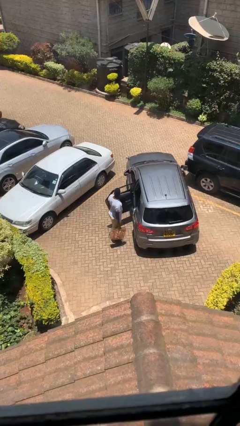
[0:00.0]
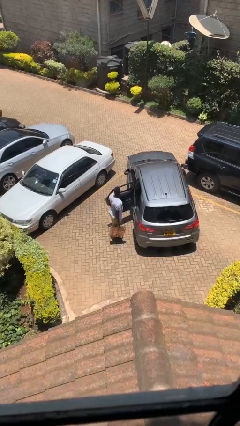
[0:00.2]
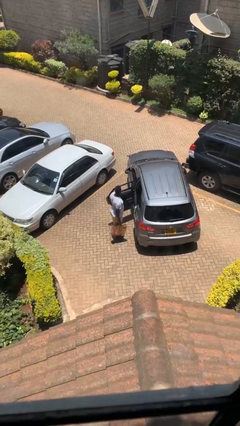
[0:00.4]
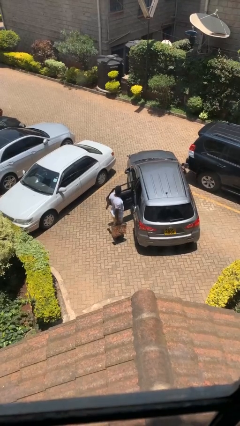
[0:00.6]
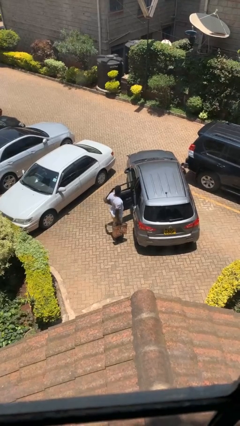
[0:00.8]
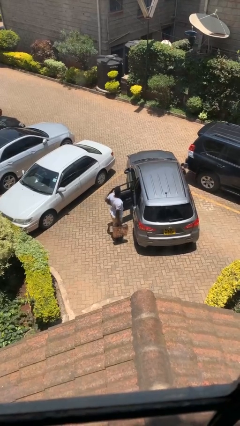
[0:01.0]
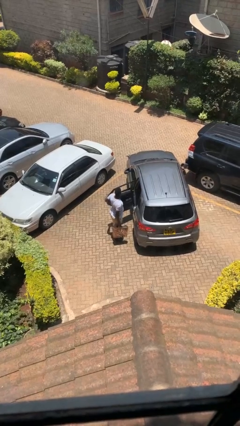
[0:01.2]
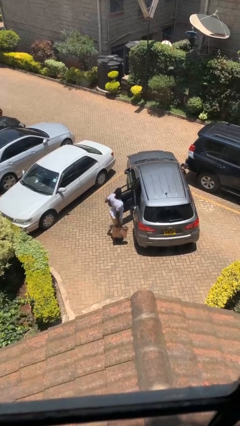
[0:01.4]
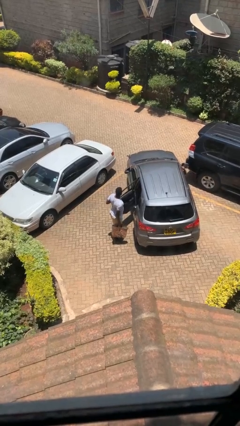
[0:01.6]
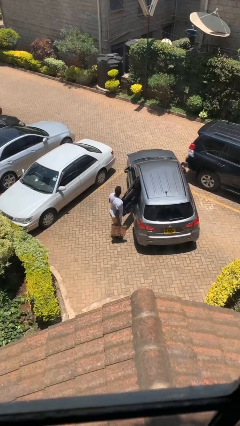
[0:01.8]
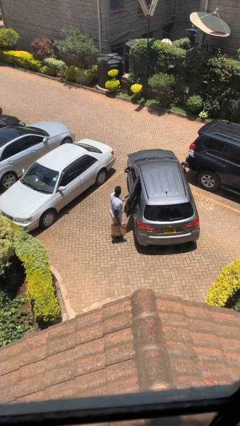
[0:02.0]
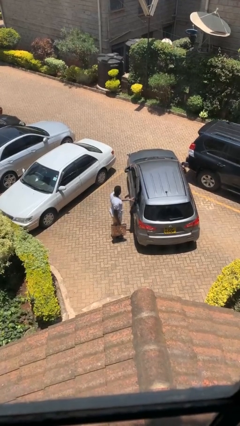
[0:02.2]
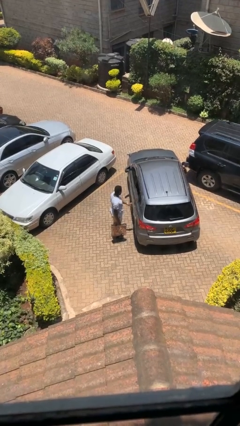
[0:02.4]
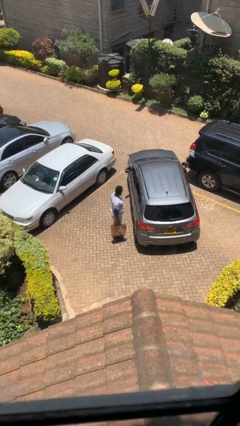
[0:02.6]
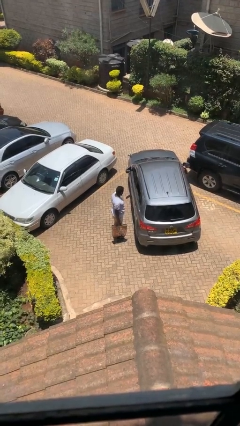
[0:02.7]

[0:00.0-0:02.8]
person closes car door

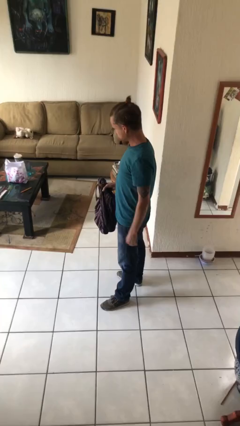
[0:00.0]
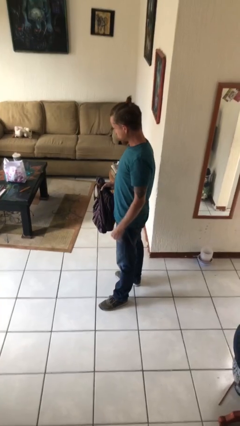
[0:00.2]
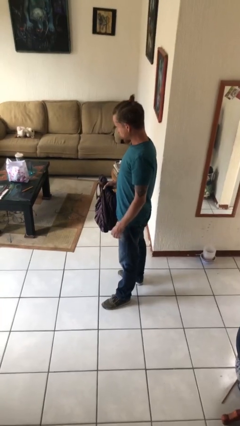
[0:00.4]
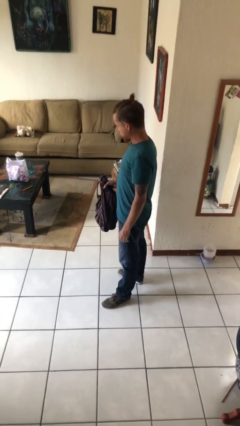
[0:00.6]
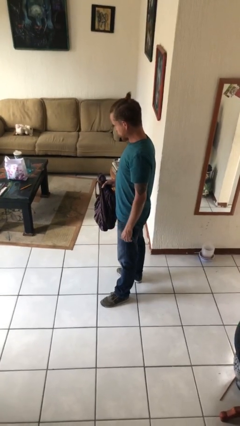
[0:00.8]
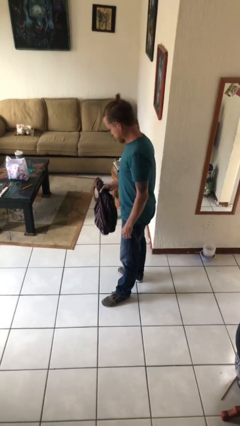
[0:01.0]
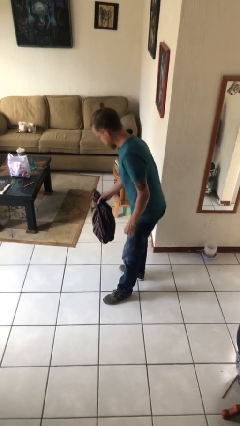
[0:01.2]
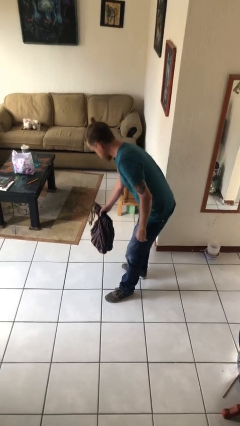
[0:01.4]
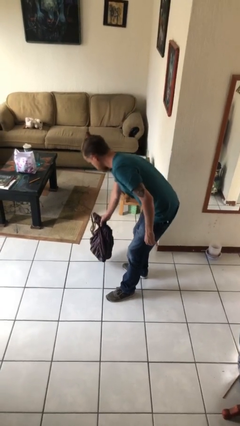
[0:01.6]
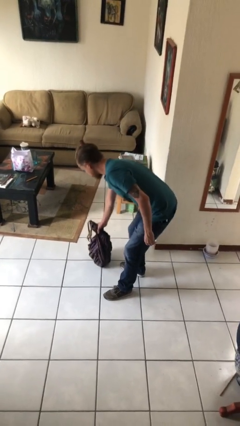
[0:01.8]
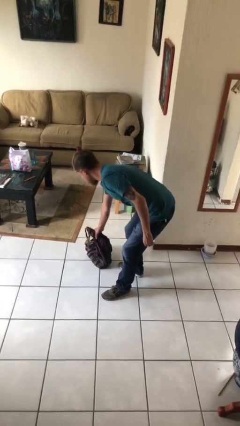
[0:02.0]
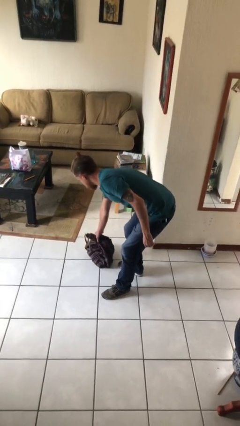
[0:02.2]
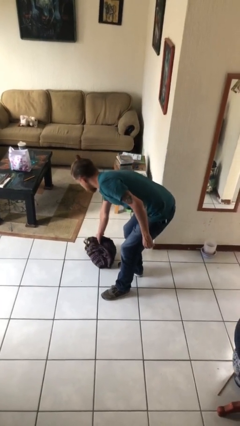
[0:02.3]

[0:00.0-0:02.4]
person puts down object on floor

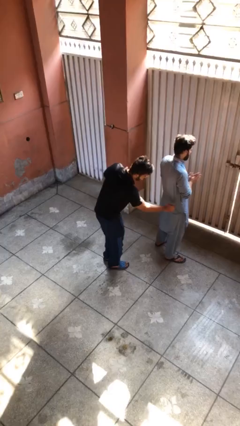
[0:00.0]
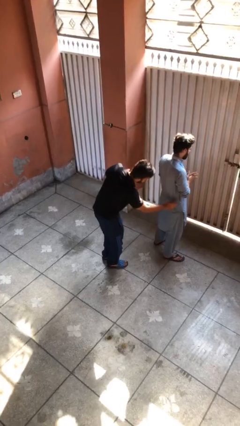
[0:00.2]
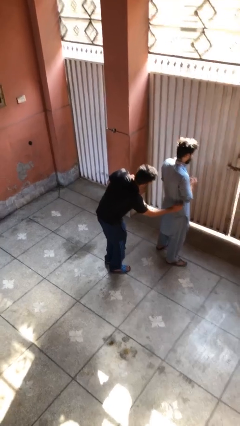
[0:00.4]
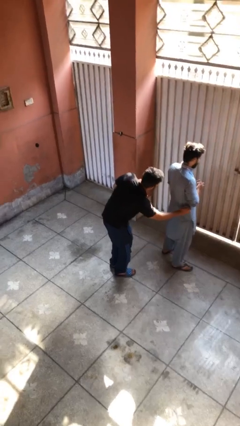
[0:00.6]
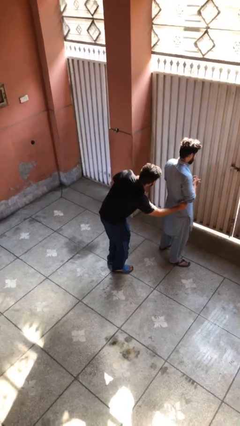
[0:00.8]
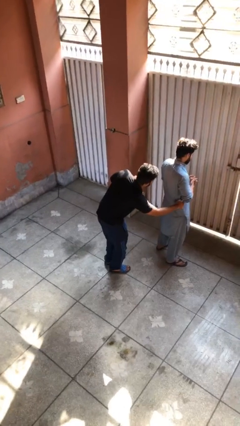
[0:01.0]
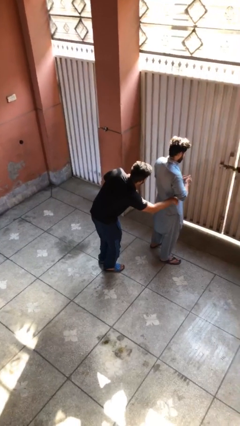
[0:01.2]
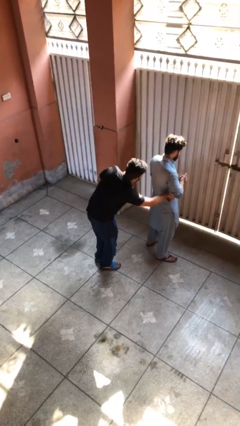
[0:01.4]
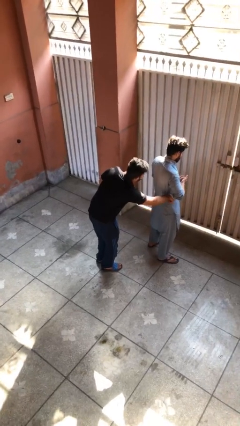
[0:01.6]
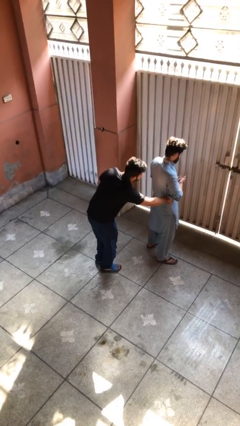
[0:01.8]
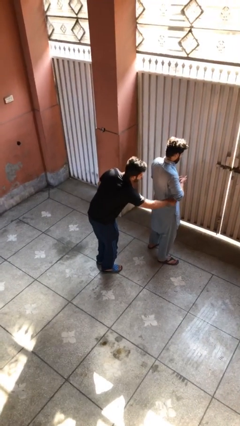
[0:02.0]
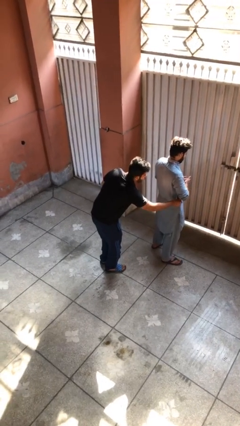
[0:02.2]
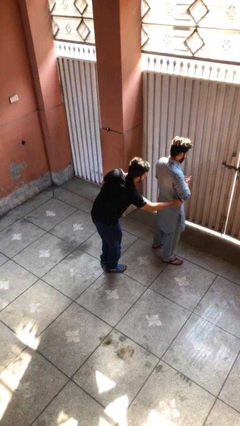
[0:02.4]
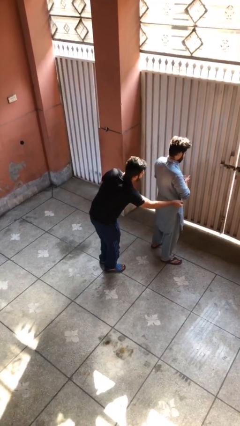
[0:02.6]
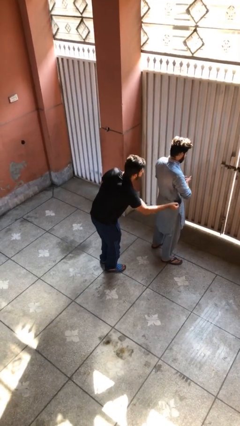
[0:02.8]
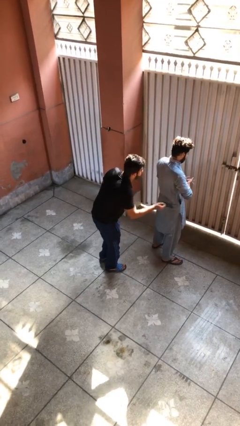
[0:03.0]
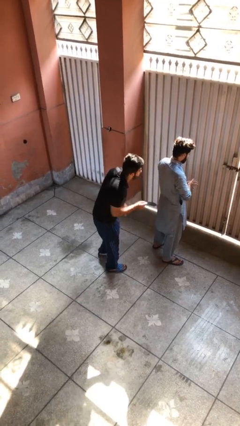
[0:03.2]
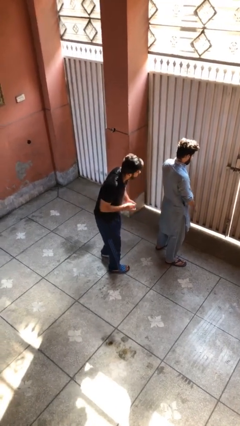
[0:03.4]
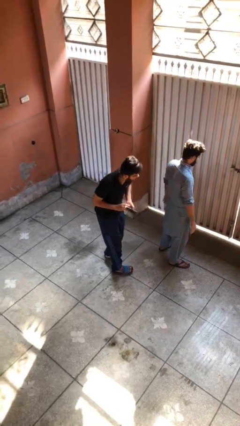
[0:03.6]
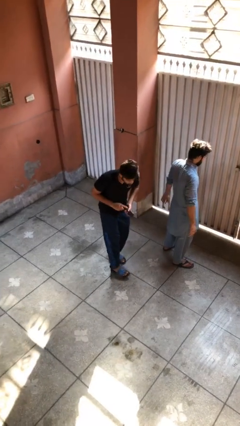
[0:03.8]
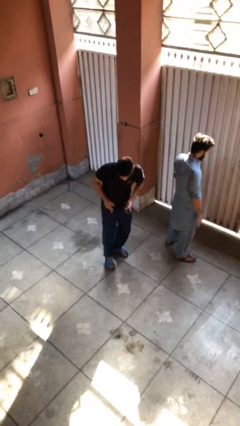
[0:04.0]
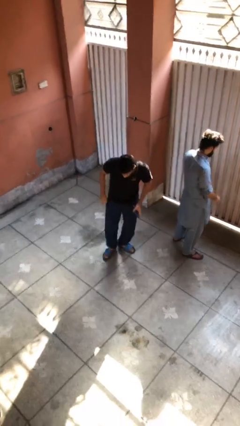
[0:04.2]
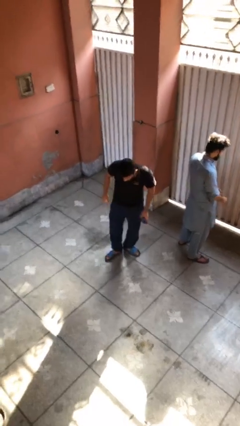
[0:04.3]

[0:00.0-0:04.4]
person steals object from person

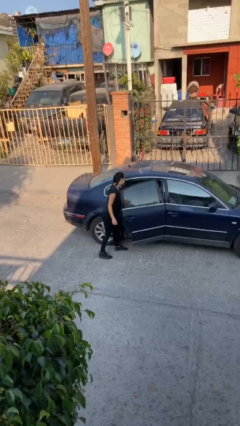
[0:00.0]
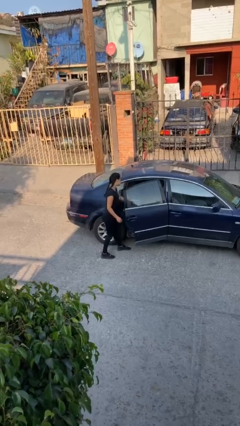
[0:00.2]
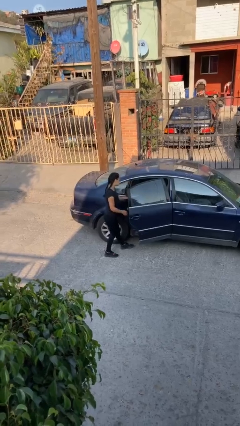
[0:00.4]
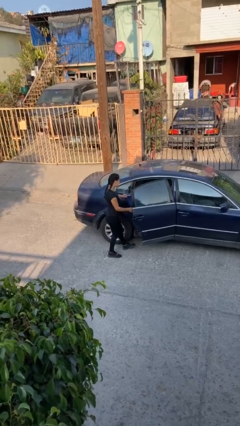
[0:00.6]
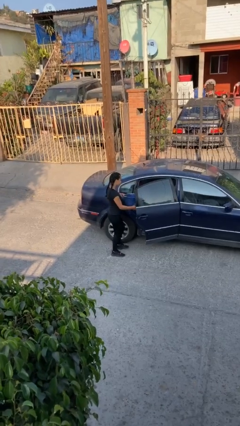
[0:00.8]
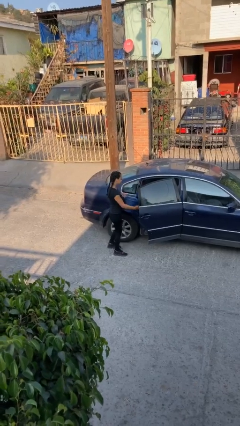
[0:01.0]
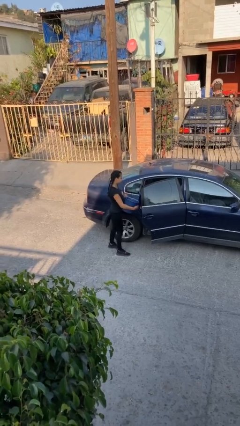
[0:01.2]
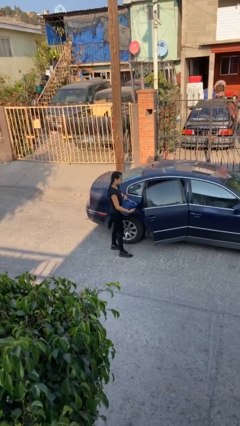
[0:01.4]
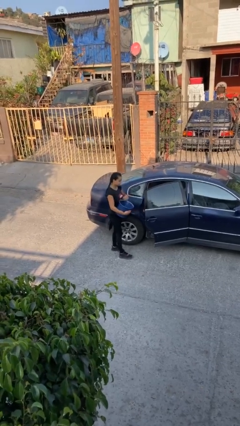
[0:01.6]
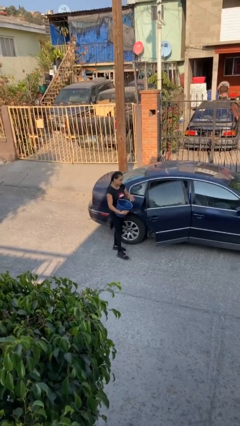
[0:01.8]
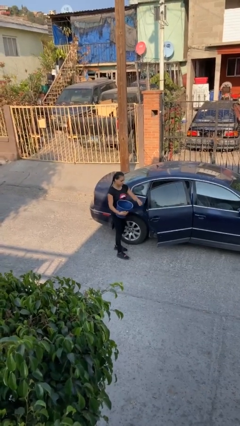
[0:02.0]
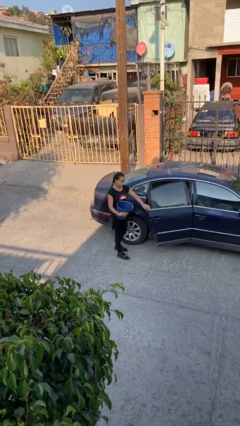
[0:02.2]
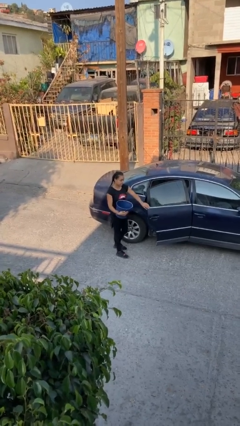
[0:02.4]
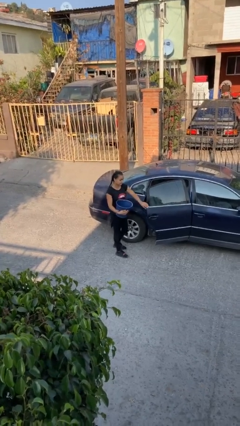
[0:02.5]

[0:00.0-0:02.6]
person unloads car

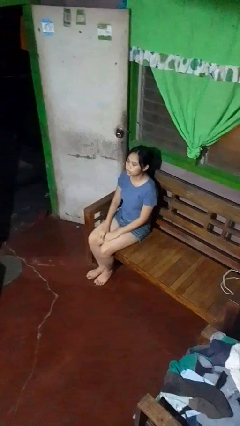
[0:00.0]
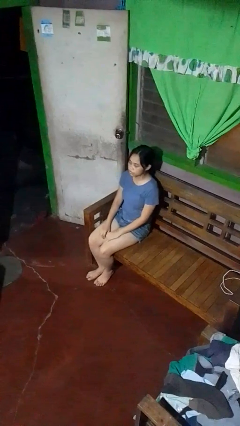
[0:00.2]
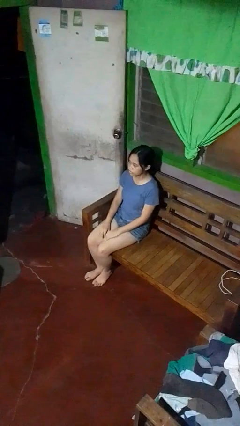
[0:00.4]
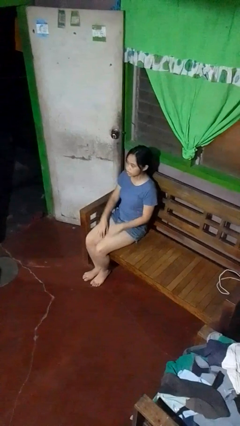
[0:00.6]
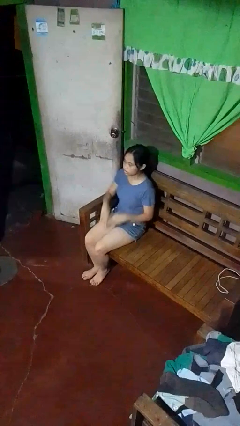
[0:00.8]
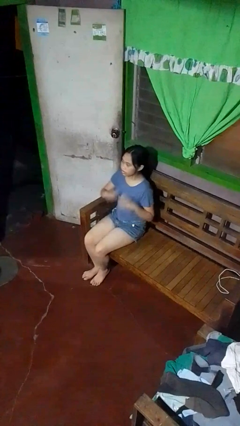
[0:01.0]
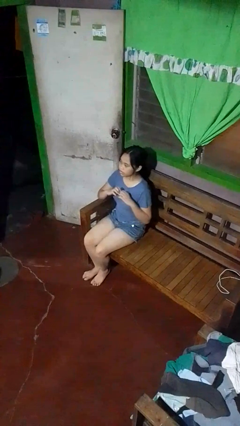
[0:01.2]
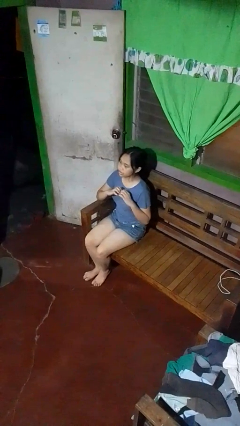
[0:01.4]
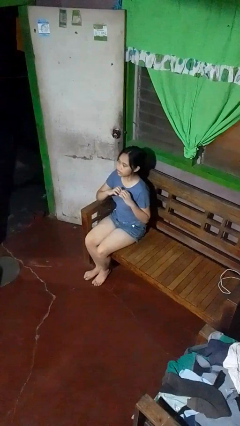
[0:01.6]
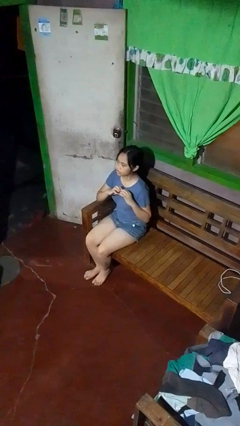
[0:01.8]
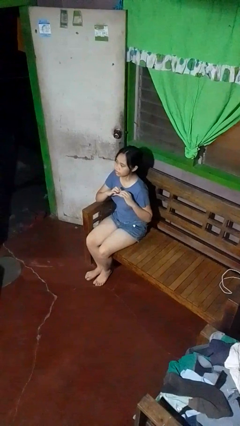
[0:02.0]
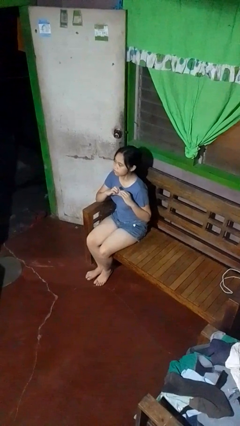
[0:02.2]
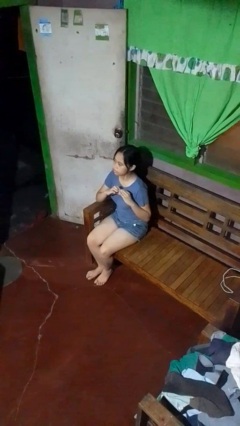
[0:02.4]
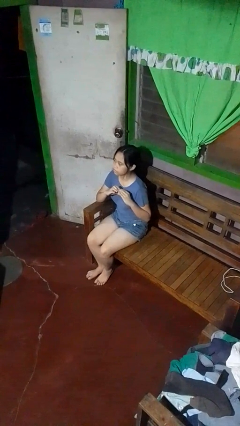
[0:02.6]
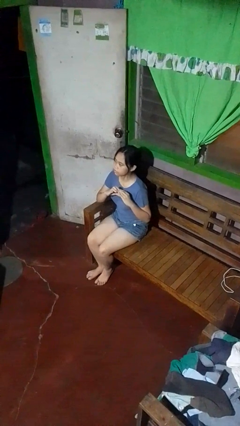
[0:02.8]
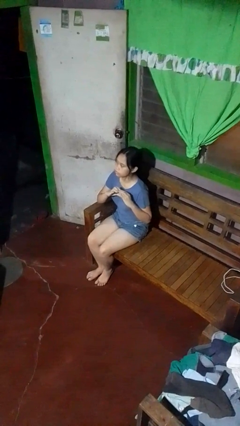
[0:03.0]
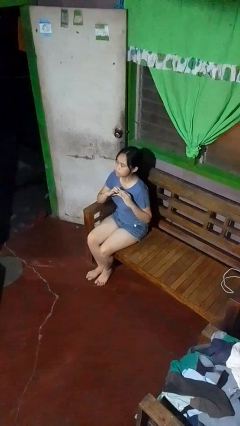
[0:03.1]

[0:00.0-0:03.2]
person gestures heart

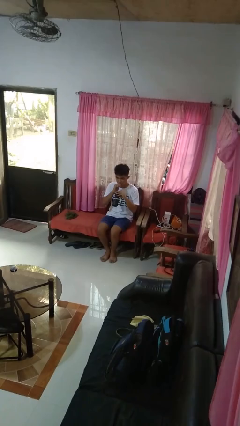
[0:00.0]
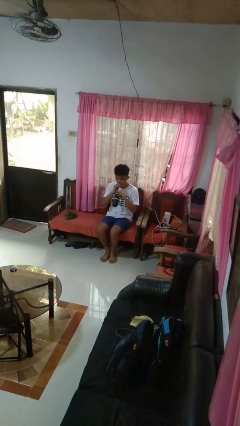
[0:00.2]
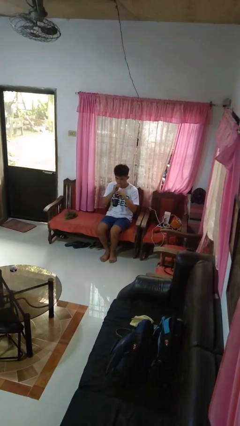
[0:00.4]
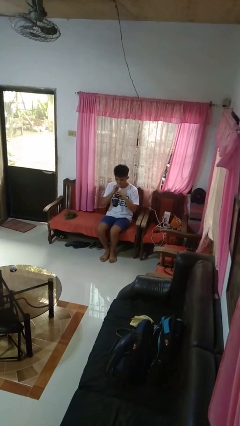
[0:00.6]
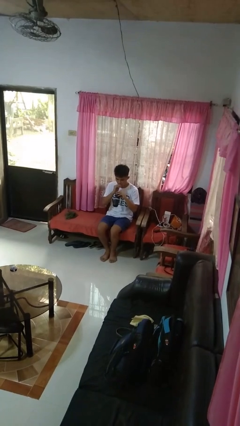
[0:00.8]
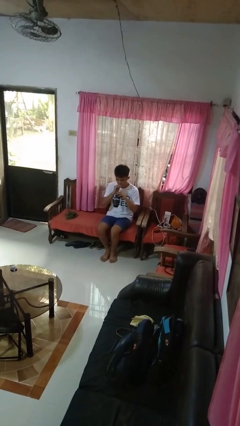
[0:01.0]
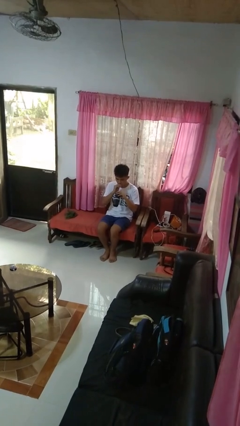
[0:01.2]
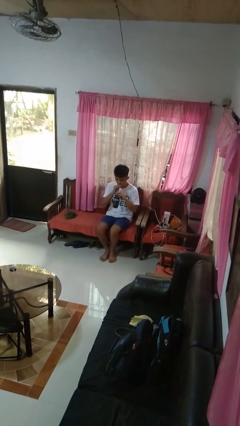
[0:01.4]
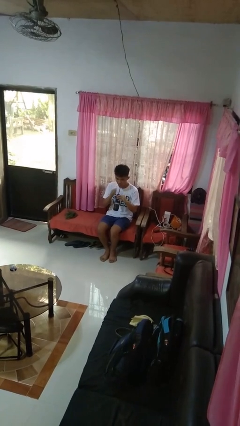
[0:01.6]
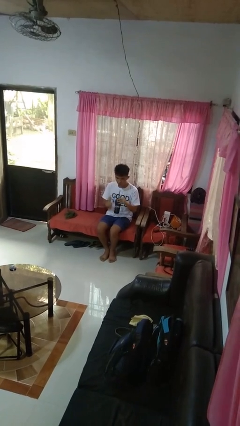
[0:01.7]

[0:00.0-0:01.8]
person drinks from straw
